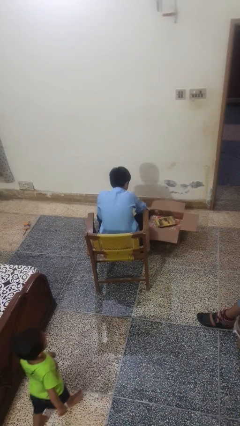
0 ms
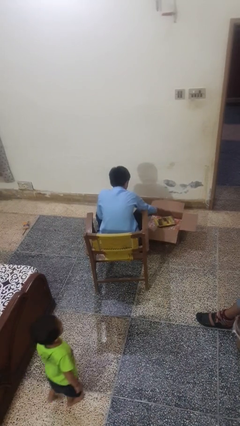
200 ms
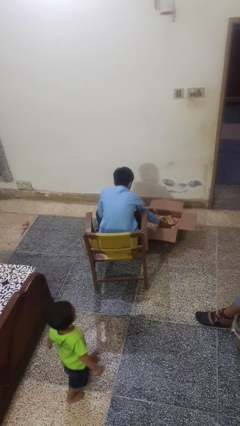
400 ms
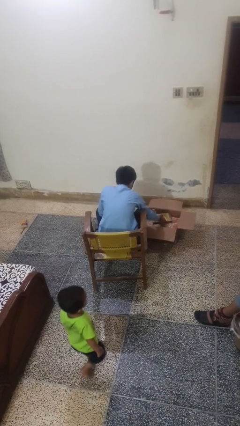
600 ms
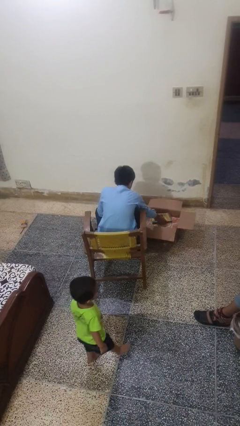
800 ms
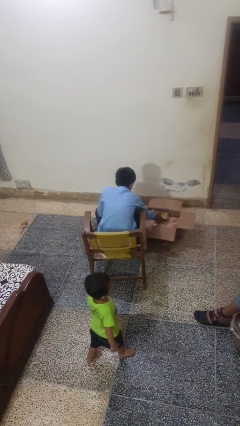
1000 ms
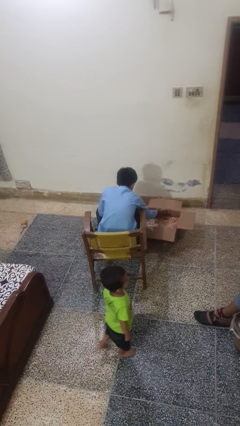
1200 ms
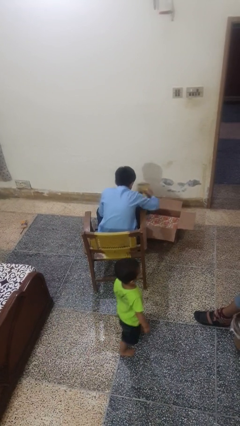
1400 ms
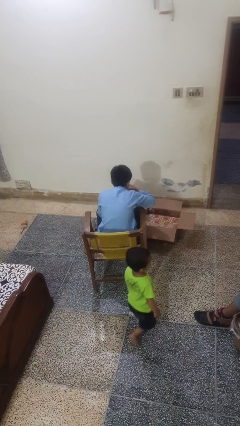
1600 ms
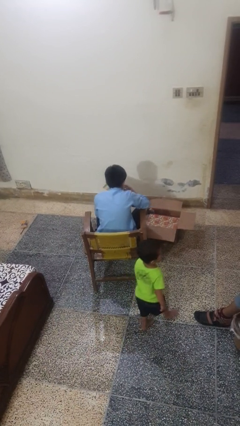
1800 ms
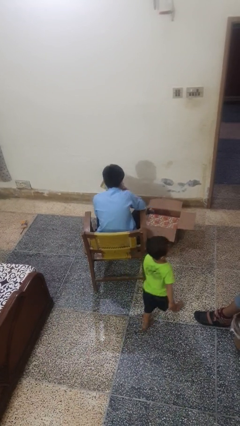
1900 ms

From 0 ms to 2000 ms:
person takes object from box

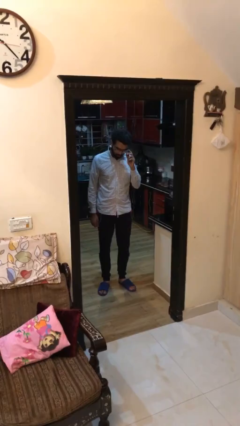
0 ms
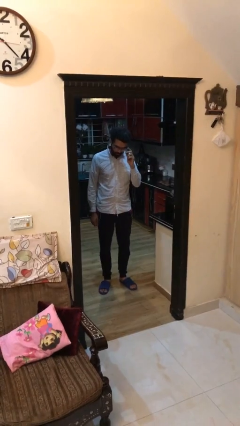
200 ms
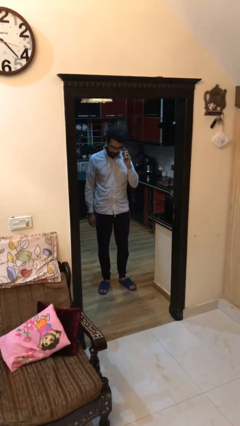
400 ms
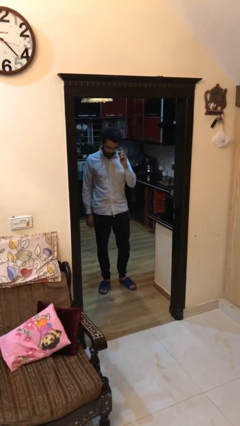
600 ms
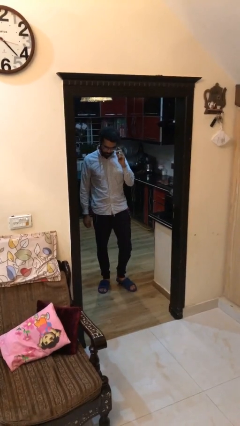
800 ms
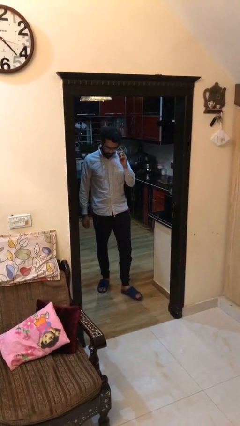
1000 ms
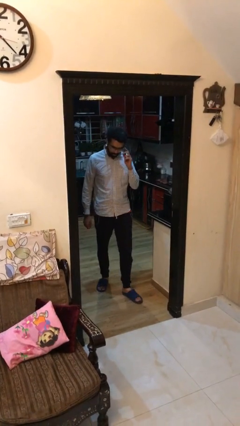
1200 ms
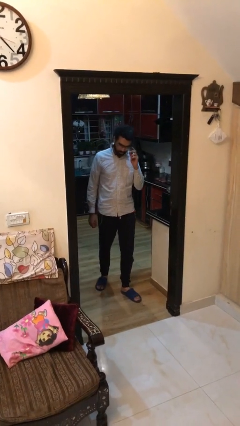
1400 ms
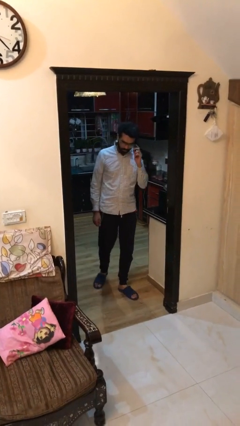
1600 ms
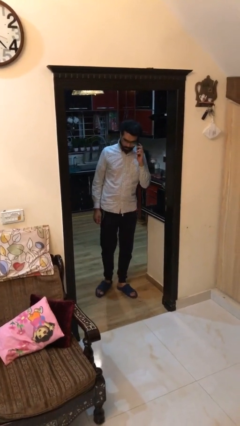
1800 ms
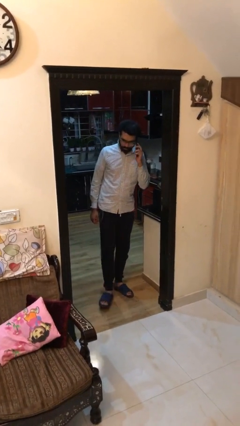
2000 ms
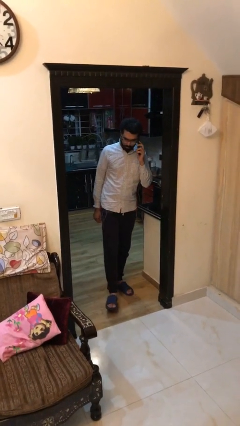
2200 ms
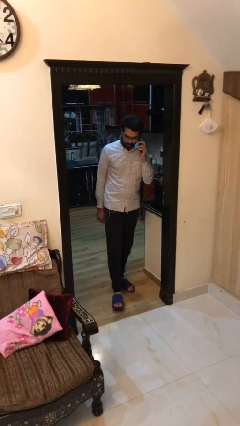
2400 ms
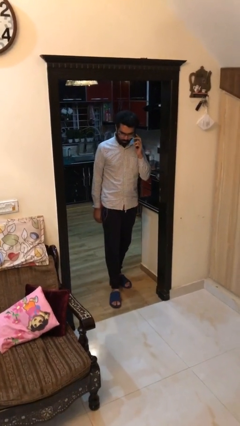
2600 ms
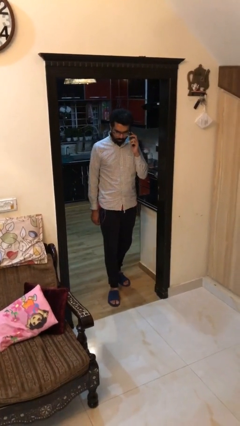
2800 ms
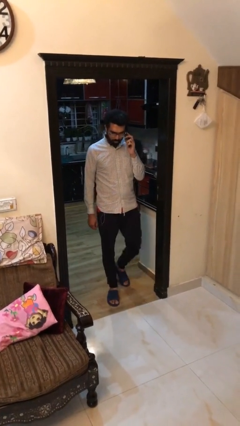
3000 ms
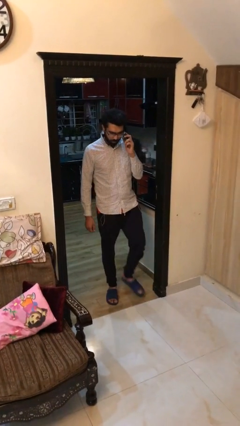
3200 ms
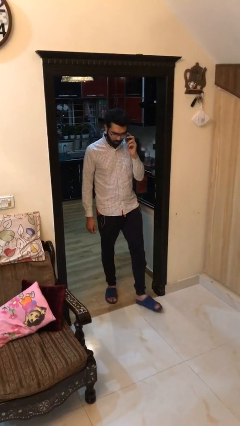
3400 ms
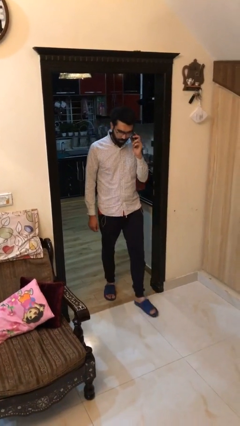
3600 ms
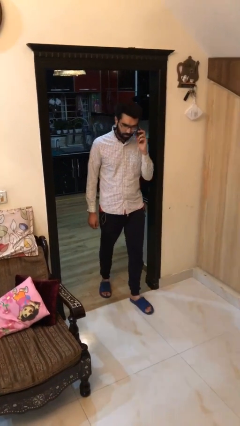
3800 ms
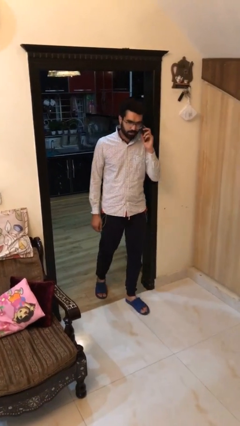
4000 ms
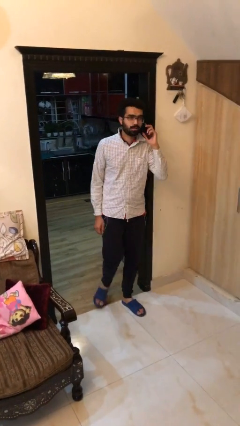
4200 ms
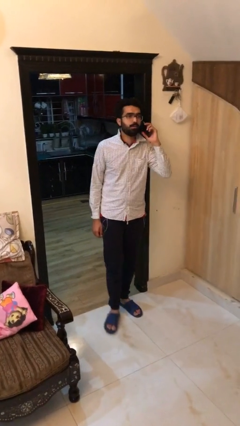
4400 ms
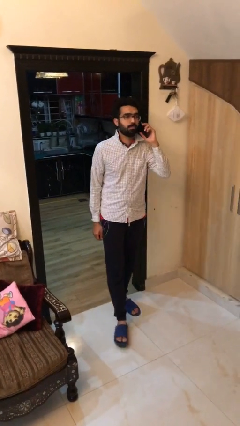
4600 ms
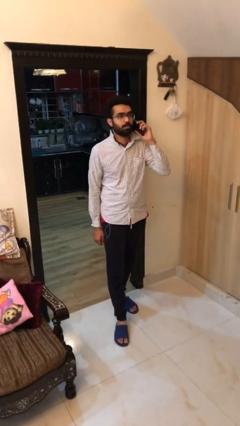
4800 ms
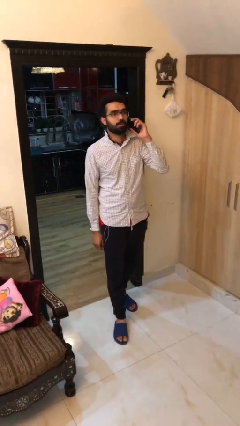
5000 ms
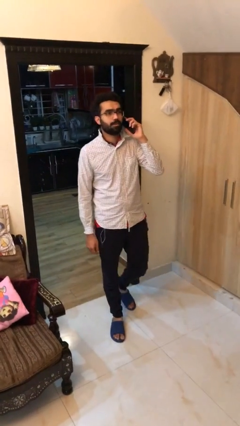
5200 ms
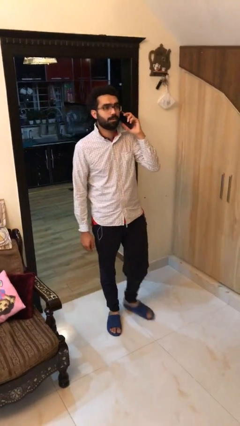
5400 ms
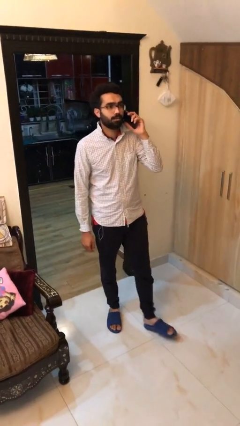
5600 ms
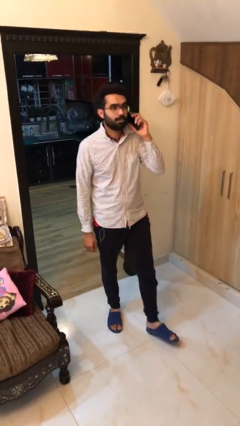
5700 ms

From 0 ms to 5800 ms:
person enters scene through structure

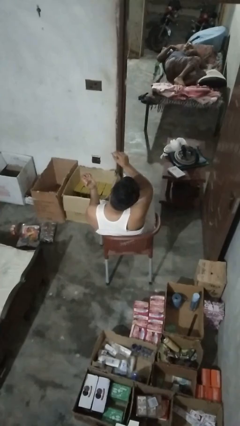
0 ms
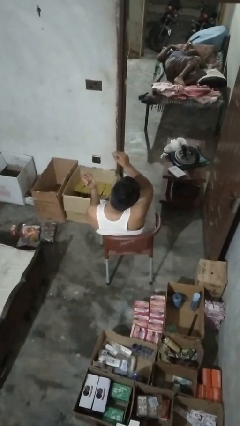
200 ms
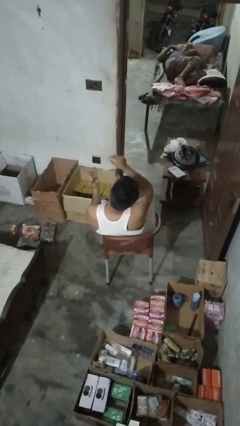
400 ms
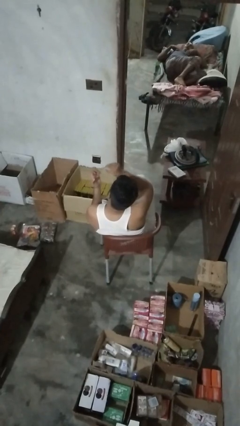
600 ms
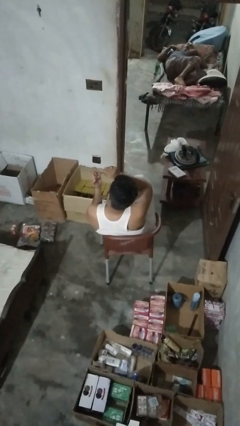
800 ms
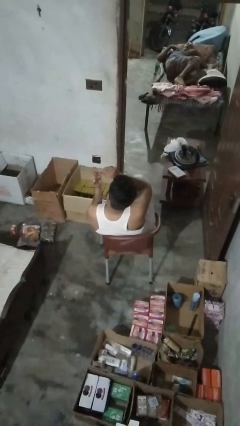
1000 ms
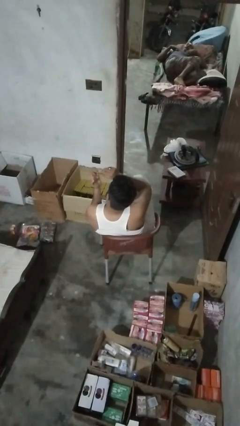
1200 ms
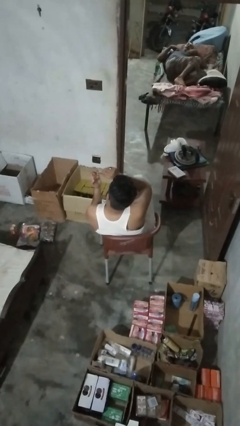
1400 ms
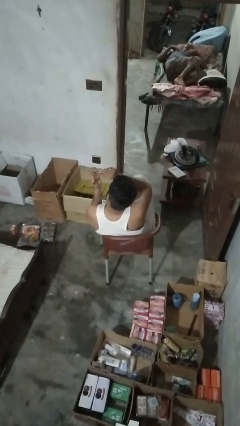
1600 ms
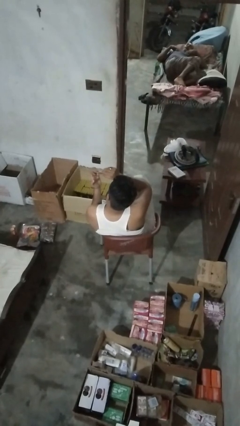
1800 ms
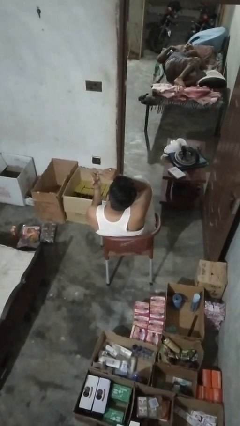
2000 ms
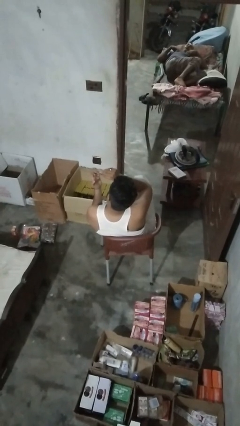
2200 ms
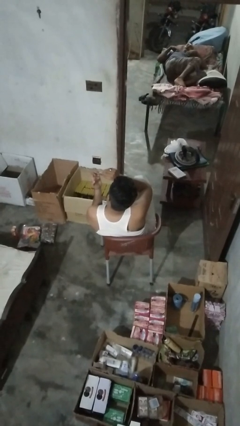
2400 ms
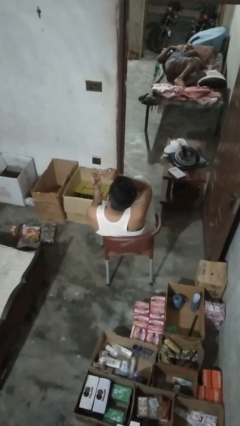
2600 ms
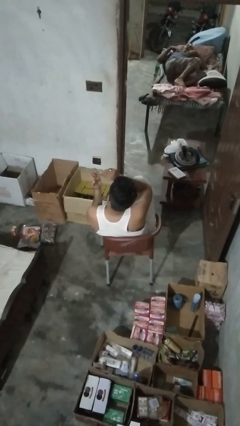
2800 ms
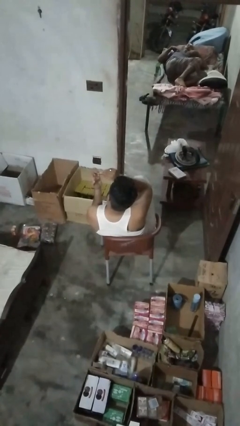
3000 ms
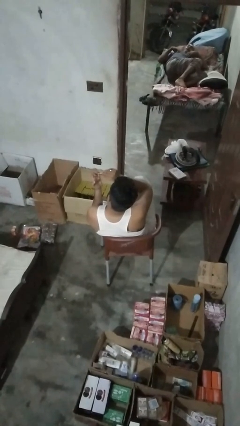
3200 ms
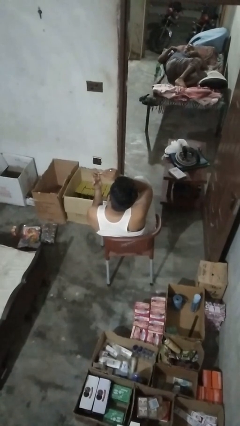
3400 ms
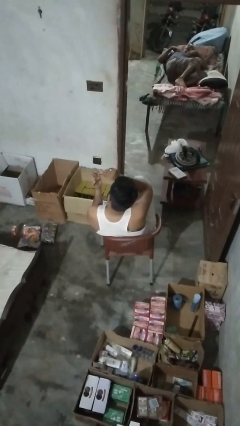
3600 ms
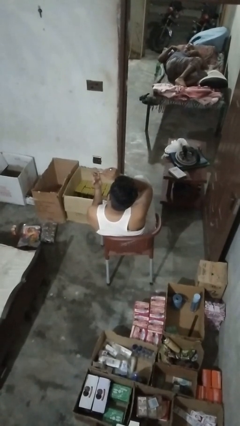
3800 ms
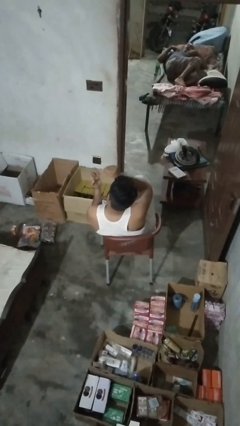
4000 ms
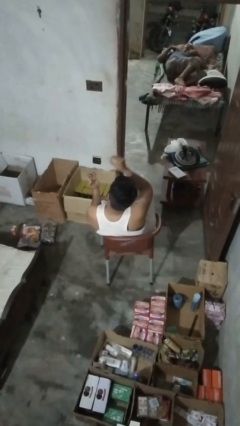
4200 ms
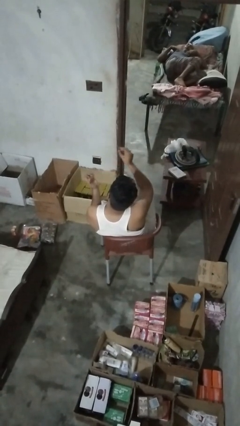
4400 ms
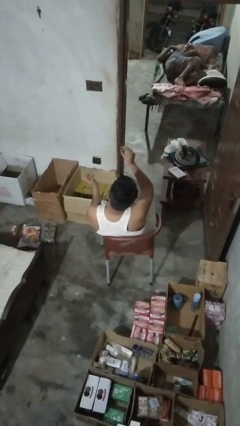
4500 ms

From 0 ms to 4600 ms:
person clips fingernails

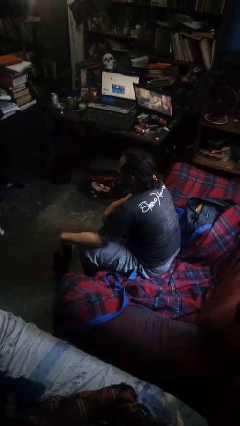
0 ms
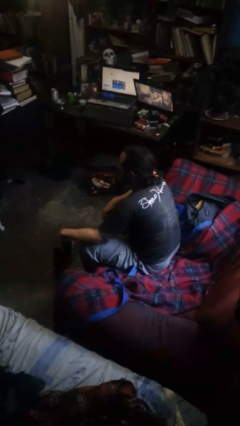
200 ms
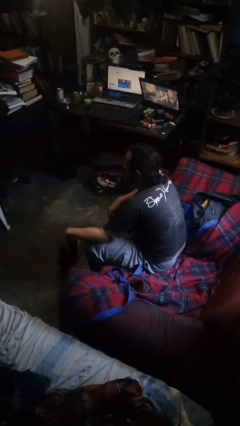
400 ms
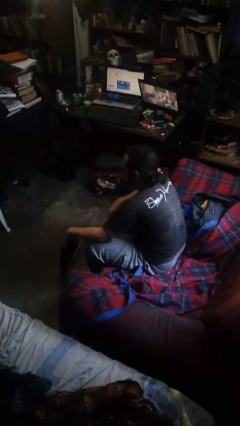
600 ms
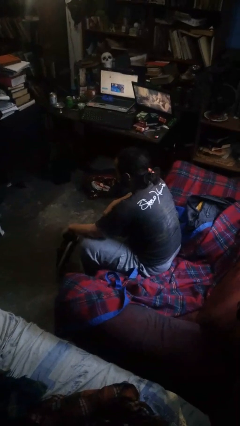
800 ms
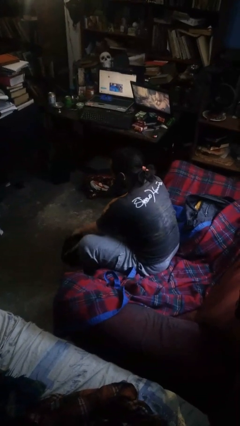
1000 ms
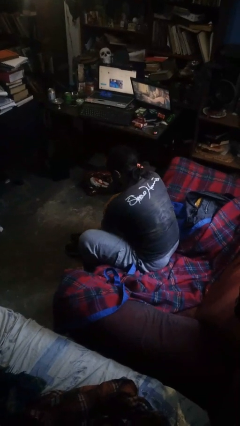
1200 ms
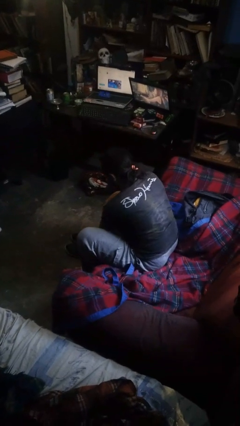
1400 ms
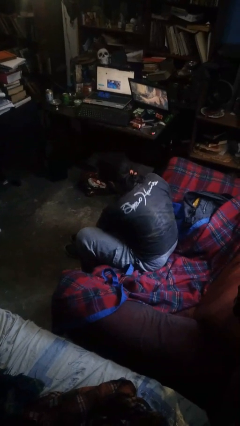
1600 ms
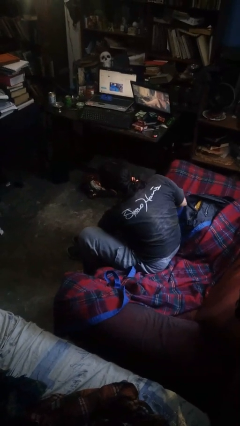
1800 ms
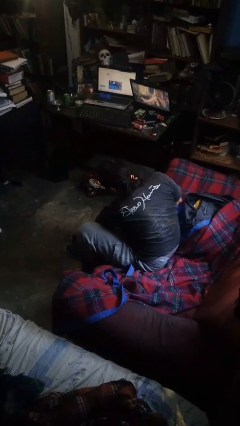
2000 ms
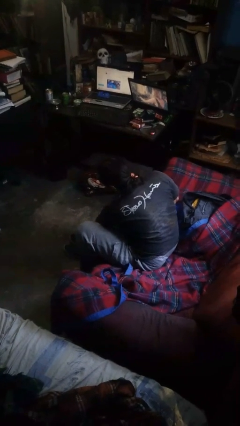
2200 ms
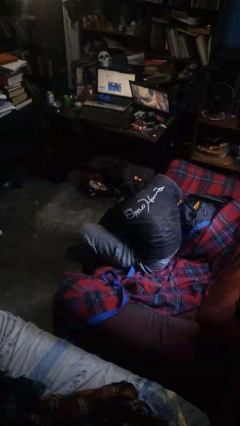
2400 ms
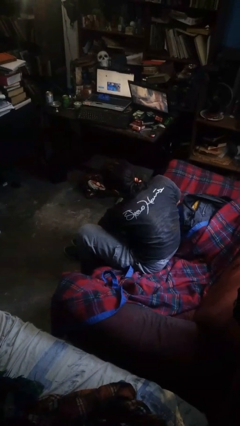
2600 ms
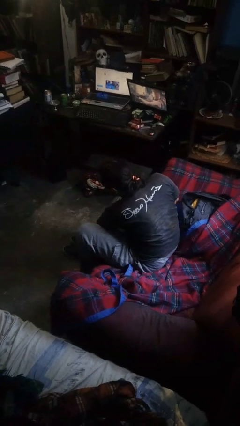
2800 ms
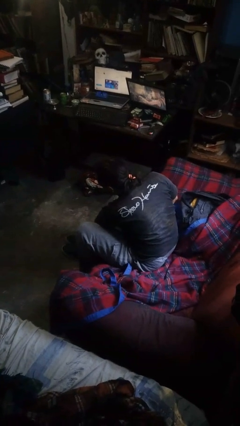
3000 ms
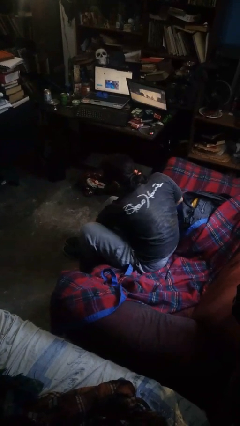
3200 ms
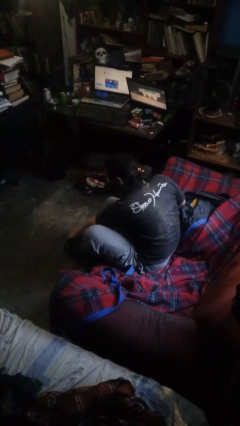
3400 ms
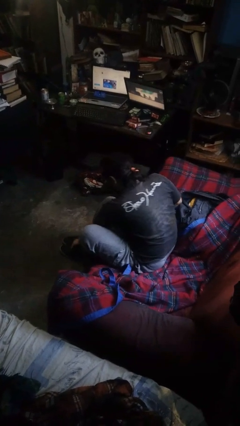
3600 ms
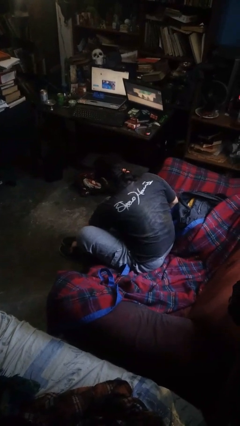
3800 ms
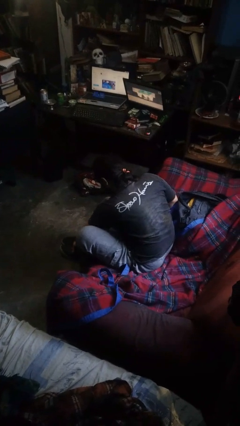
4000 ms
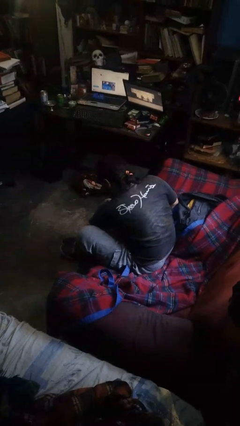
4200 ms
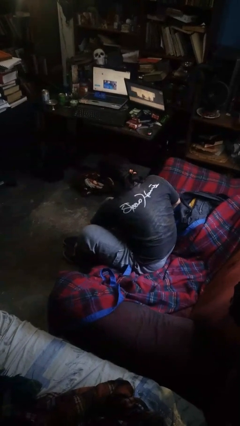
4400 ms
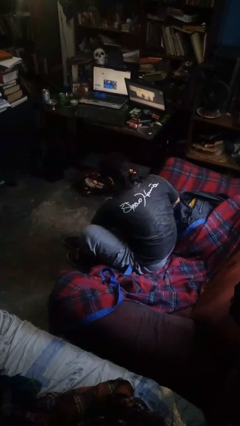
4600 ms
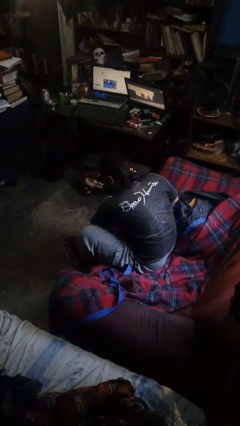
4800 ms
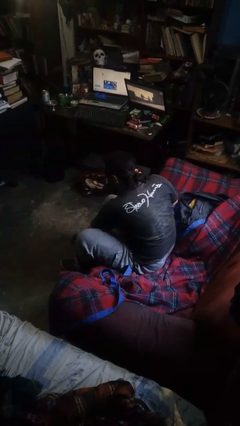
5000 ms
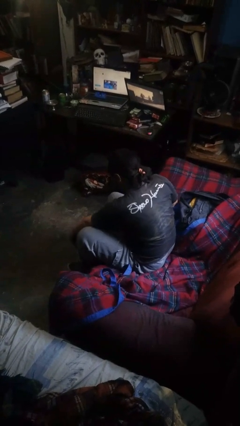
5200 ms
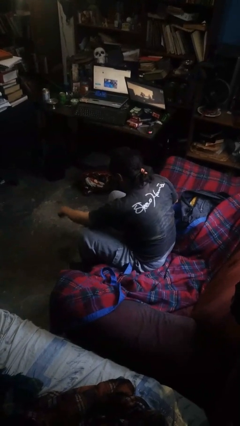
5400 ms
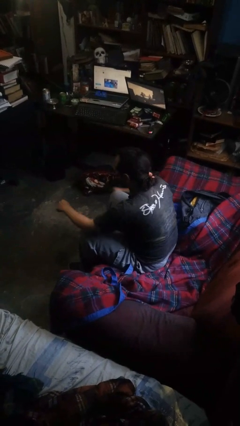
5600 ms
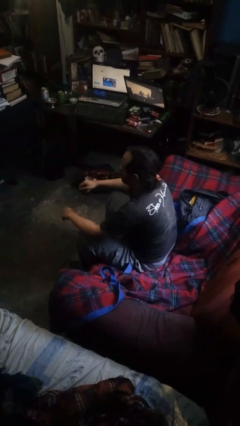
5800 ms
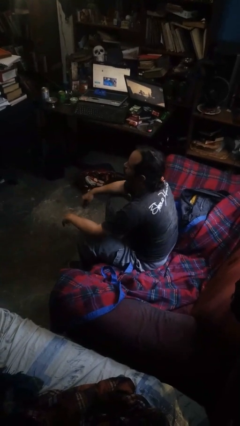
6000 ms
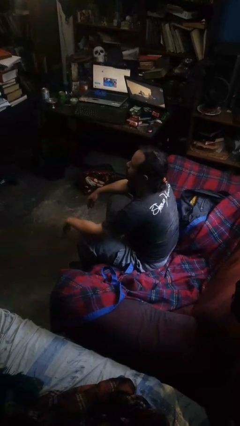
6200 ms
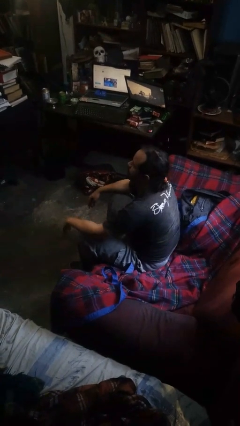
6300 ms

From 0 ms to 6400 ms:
person puts on shoes
